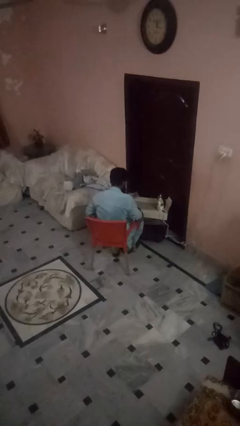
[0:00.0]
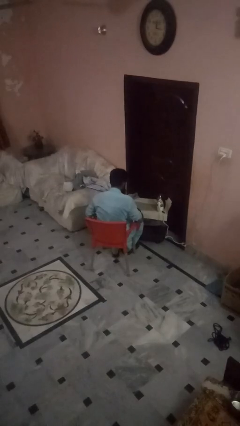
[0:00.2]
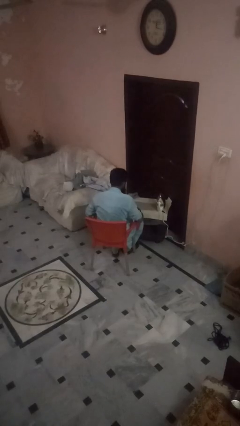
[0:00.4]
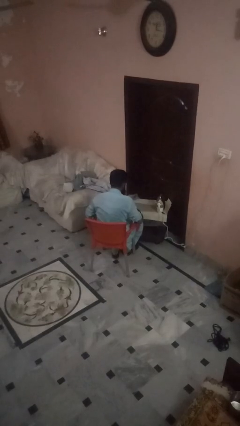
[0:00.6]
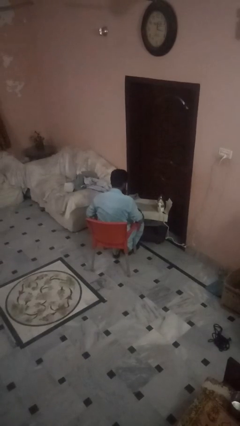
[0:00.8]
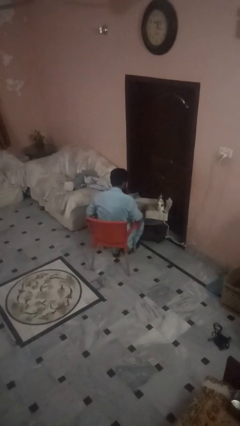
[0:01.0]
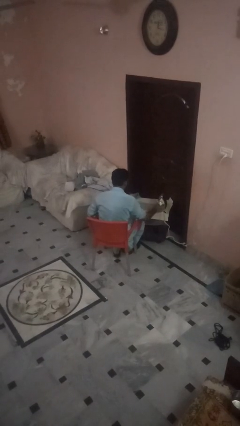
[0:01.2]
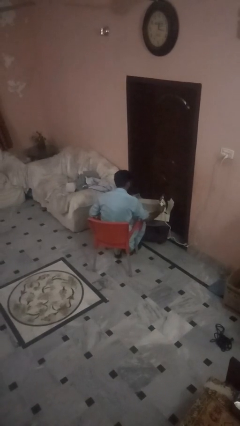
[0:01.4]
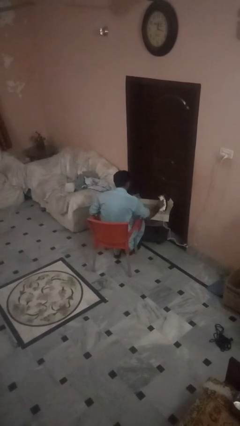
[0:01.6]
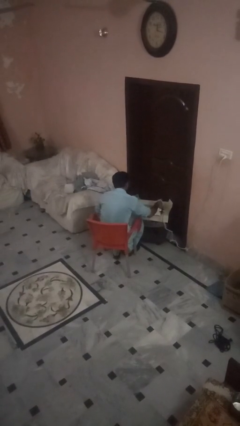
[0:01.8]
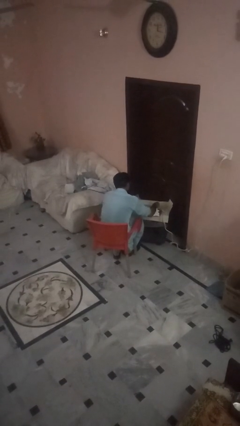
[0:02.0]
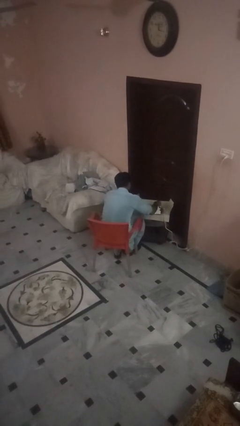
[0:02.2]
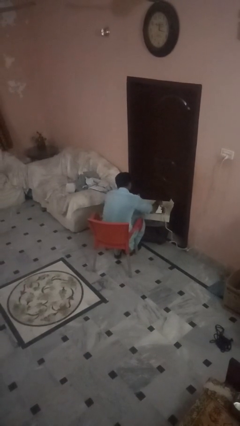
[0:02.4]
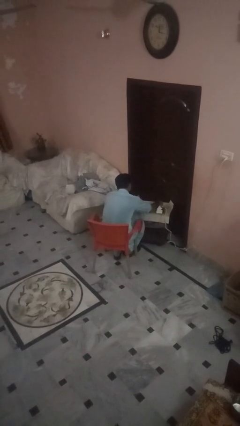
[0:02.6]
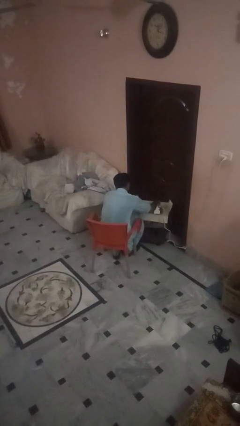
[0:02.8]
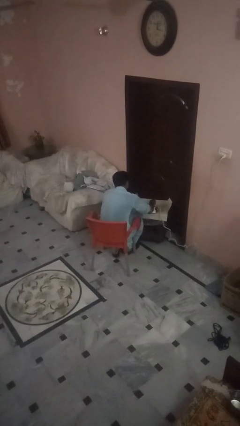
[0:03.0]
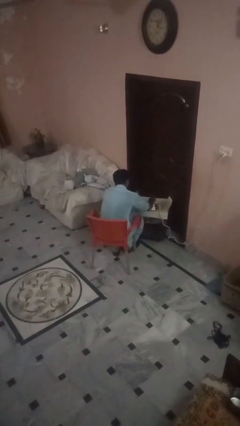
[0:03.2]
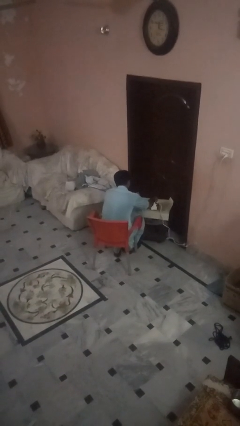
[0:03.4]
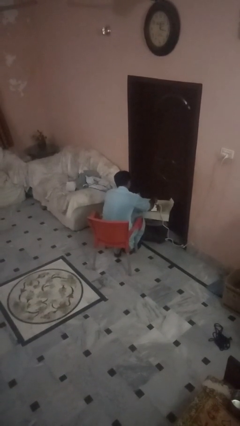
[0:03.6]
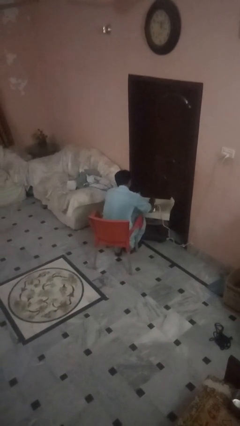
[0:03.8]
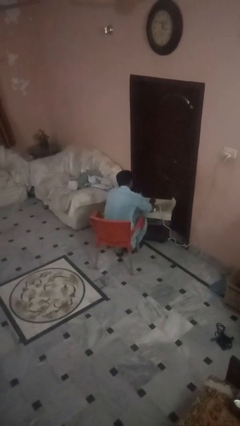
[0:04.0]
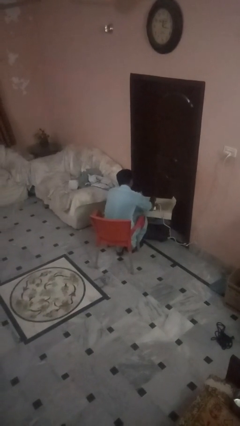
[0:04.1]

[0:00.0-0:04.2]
person irons clothes

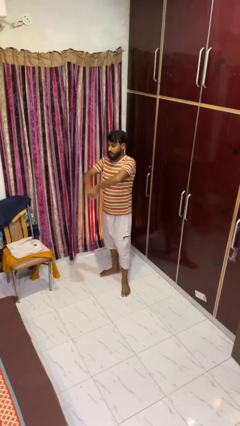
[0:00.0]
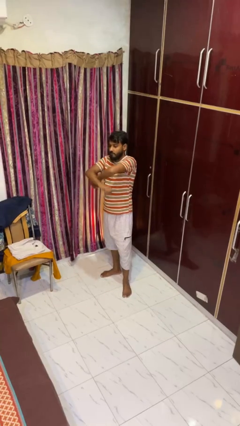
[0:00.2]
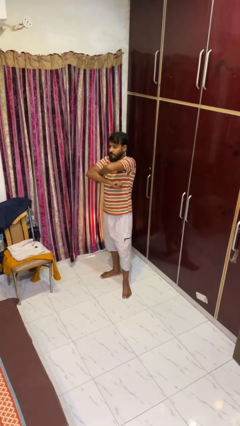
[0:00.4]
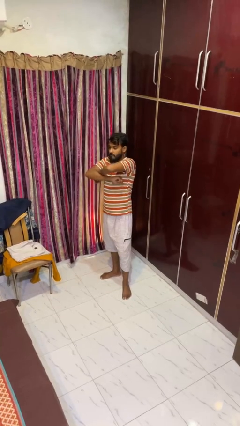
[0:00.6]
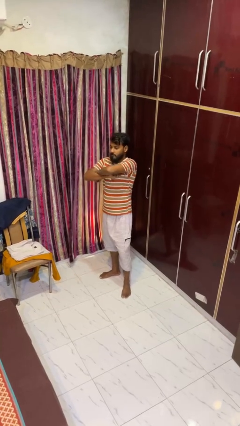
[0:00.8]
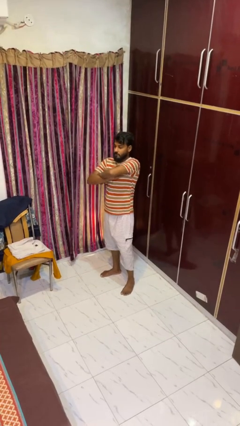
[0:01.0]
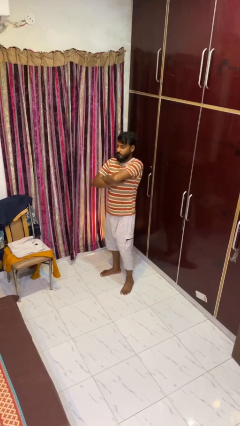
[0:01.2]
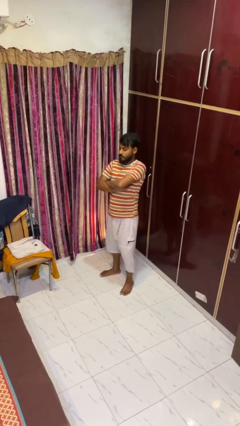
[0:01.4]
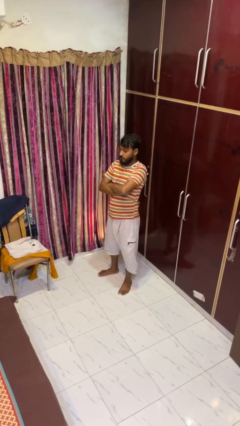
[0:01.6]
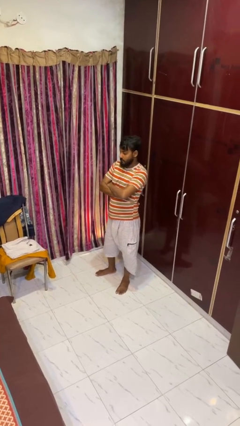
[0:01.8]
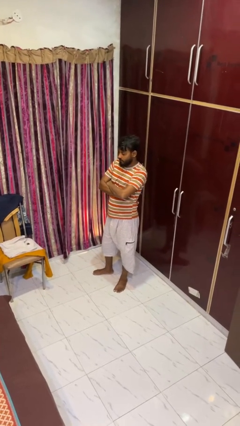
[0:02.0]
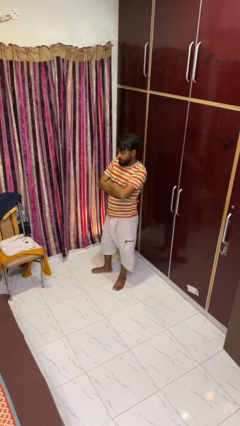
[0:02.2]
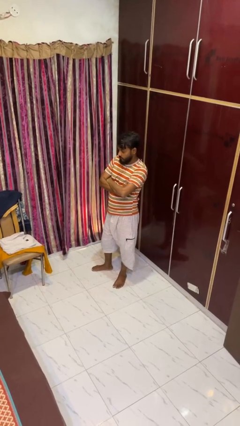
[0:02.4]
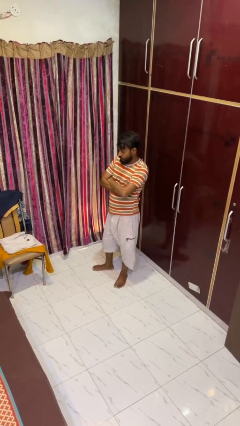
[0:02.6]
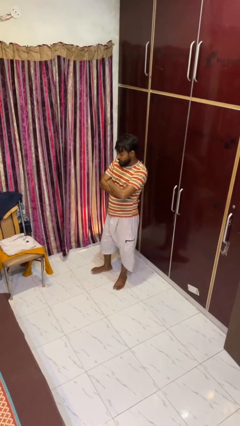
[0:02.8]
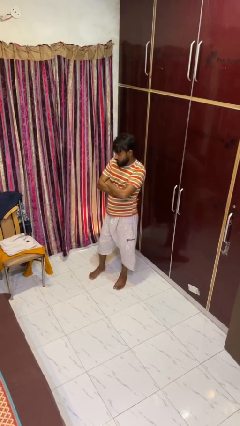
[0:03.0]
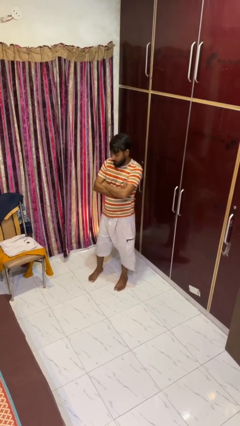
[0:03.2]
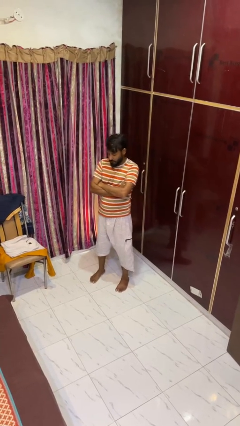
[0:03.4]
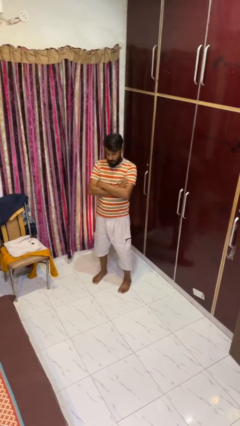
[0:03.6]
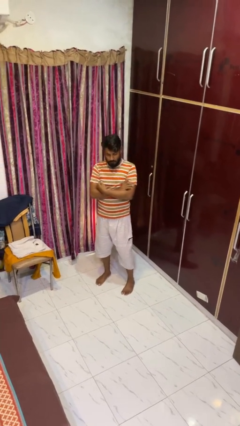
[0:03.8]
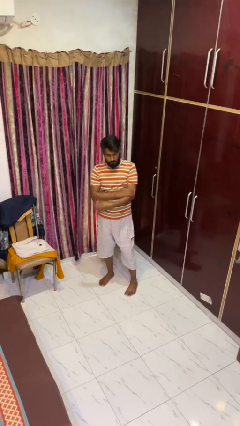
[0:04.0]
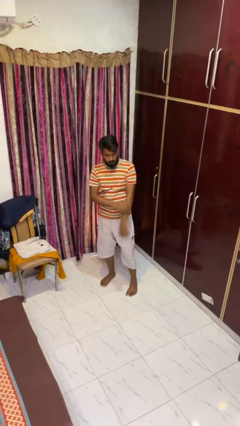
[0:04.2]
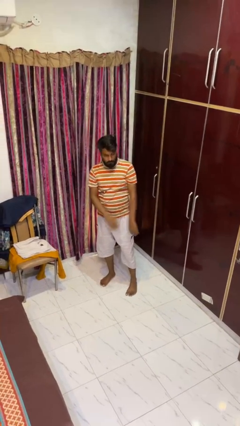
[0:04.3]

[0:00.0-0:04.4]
person crosses arms

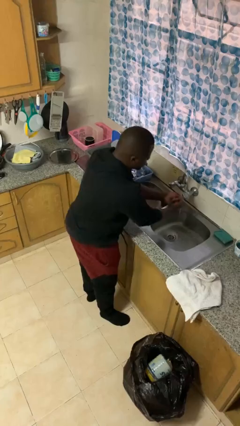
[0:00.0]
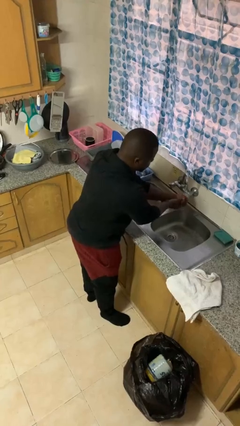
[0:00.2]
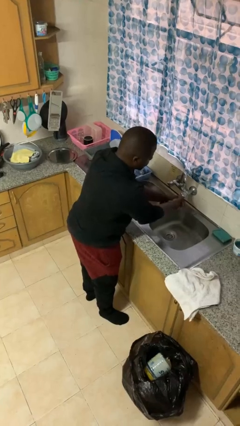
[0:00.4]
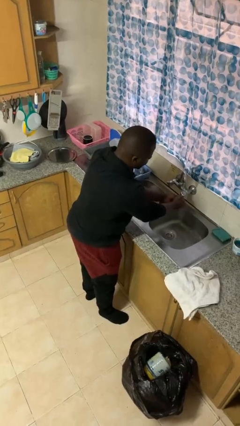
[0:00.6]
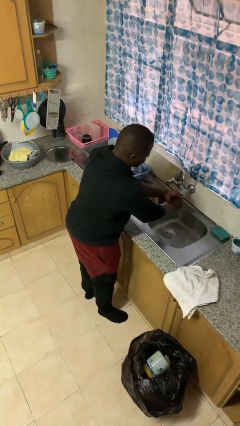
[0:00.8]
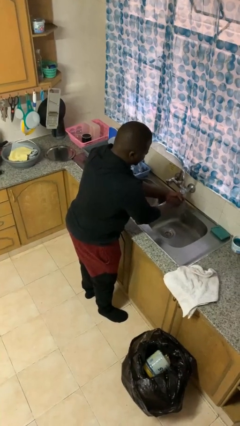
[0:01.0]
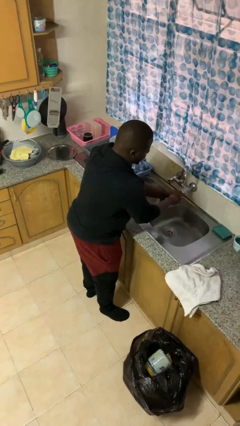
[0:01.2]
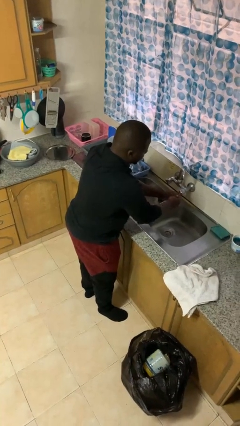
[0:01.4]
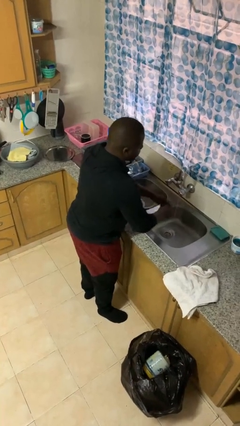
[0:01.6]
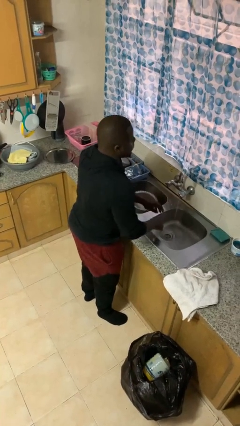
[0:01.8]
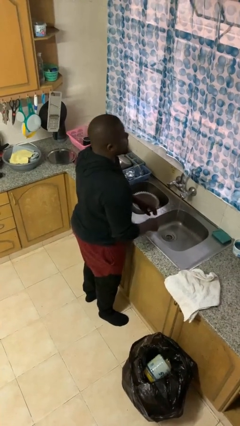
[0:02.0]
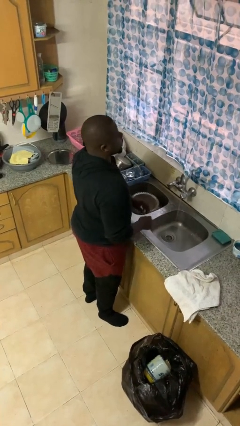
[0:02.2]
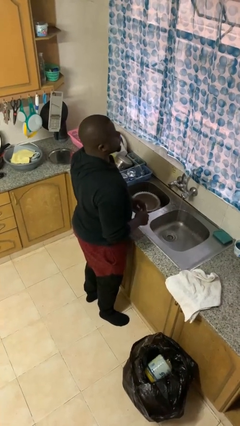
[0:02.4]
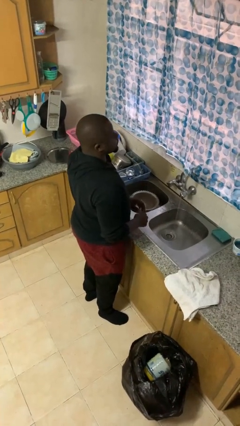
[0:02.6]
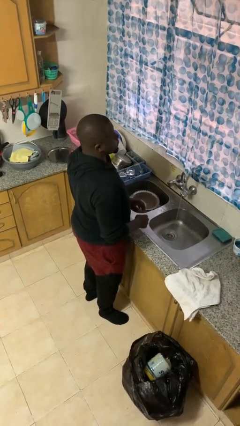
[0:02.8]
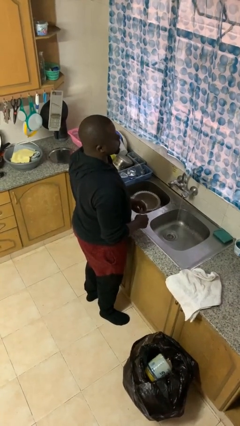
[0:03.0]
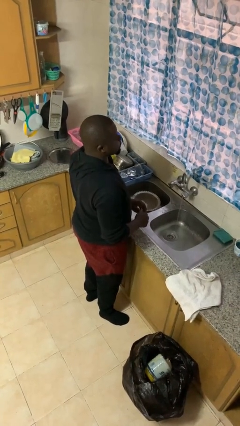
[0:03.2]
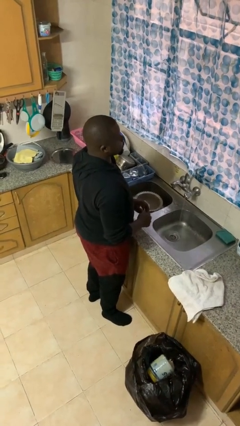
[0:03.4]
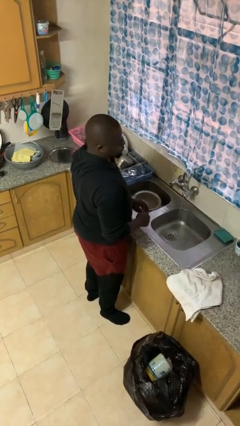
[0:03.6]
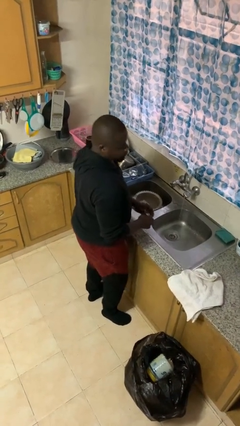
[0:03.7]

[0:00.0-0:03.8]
person washes hands

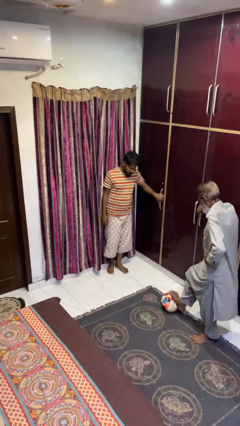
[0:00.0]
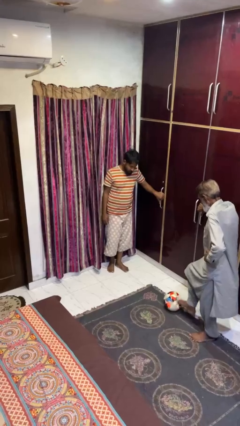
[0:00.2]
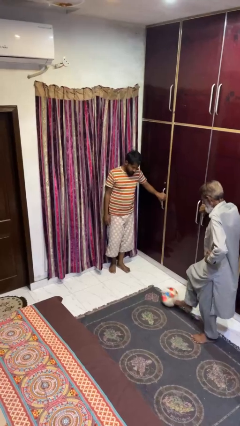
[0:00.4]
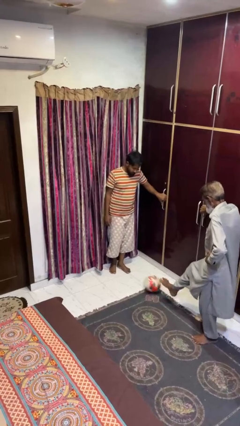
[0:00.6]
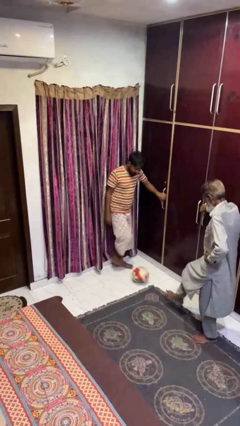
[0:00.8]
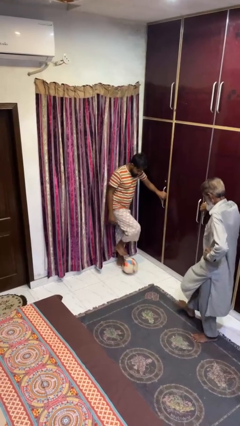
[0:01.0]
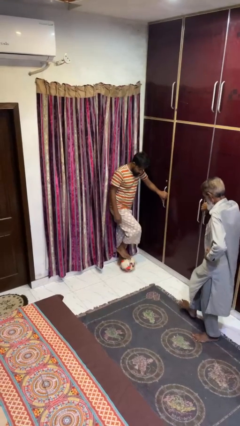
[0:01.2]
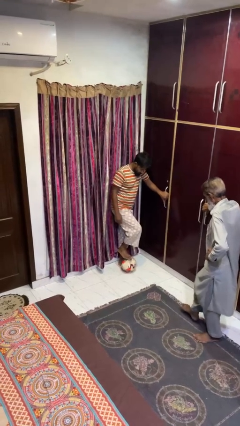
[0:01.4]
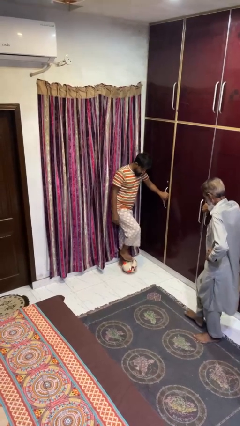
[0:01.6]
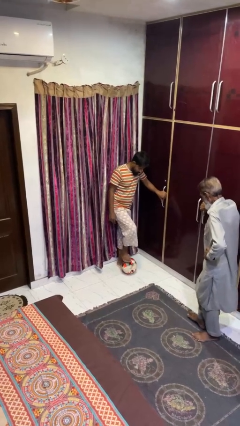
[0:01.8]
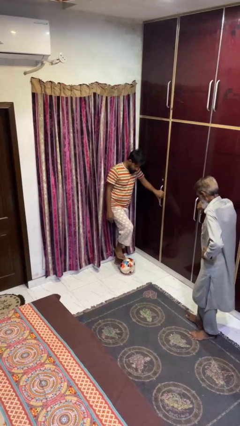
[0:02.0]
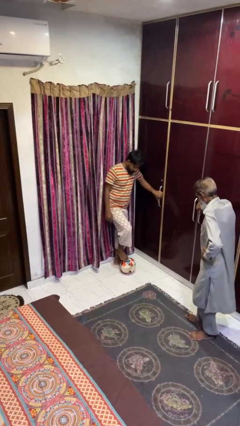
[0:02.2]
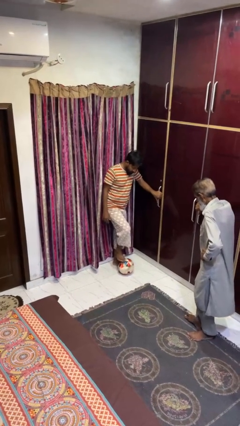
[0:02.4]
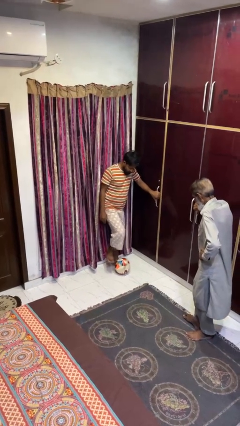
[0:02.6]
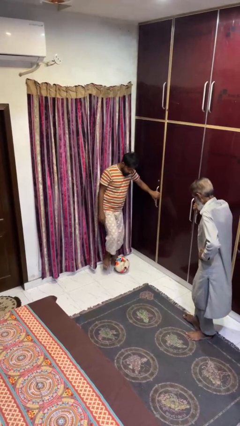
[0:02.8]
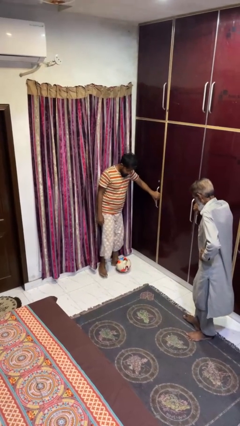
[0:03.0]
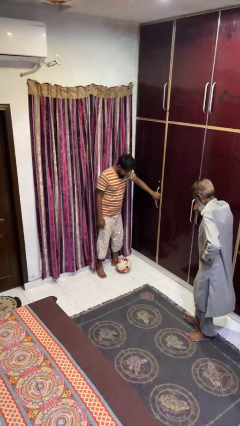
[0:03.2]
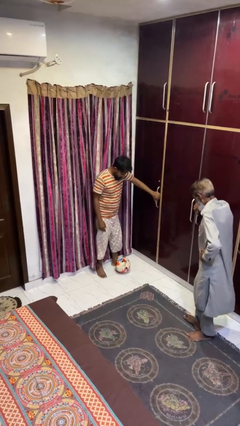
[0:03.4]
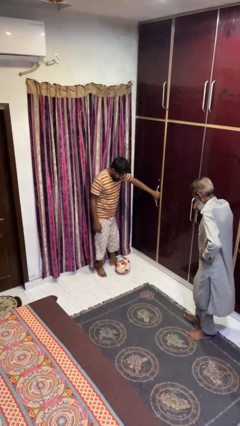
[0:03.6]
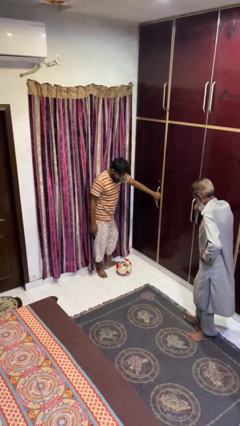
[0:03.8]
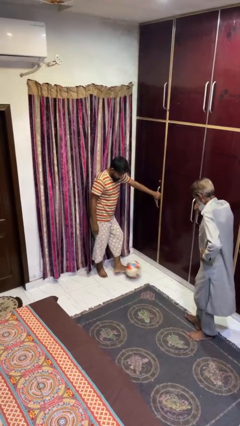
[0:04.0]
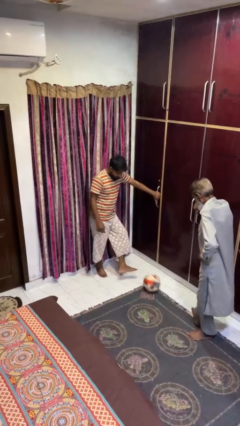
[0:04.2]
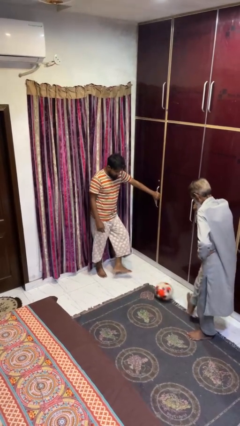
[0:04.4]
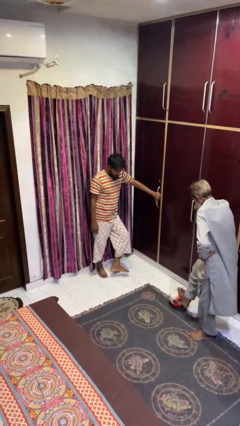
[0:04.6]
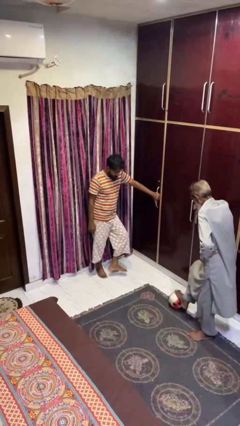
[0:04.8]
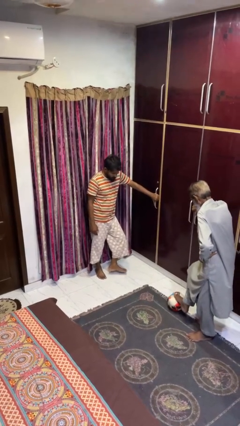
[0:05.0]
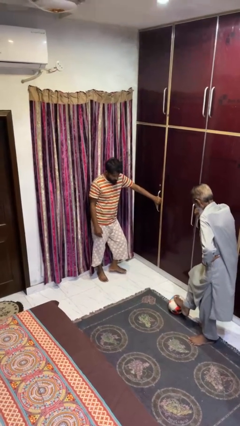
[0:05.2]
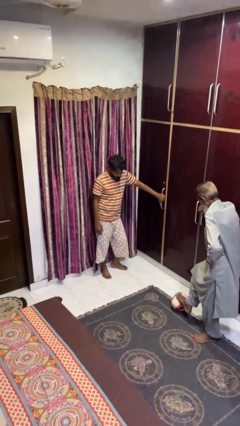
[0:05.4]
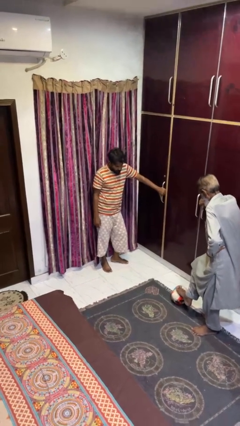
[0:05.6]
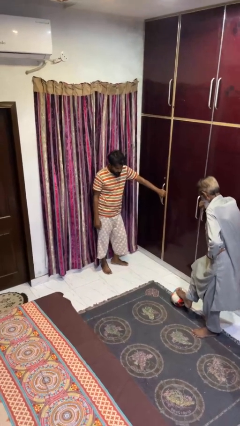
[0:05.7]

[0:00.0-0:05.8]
person kicks object to person
